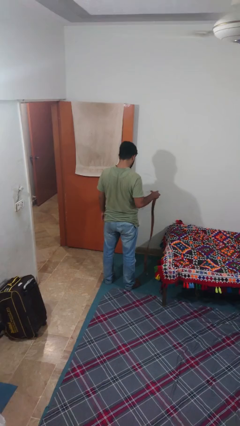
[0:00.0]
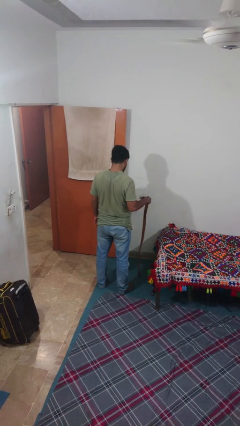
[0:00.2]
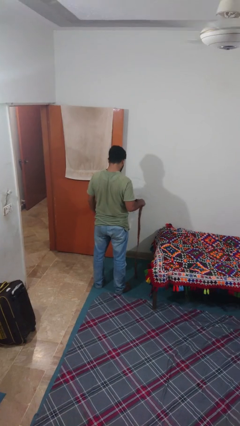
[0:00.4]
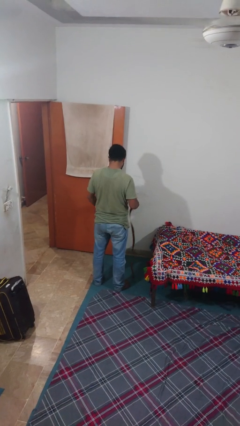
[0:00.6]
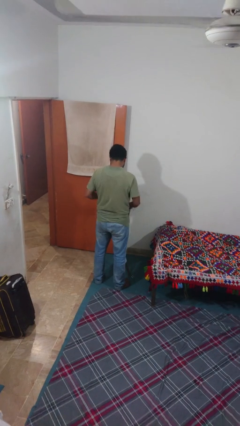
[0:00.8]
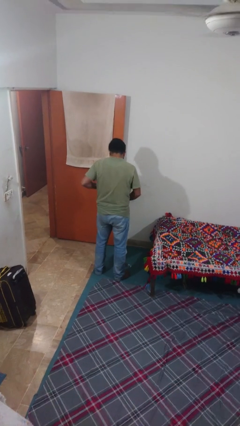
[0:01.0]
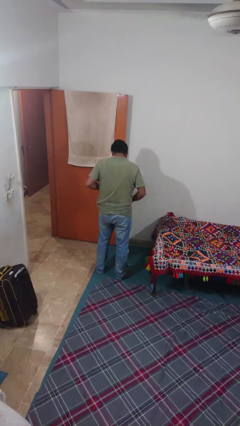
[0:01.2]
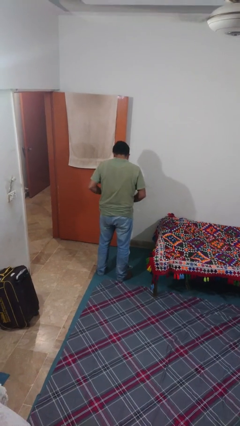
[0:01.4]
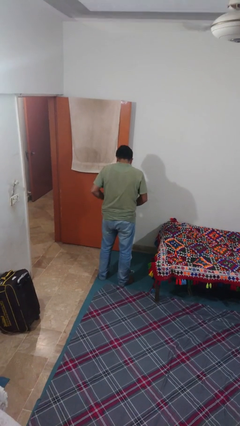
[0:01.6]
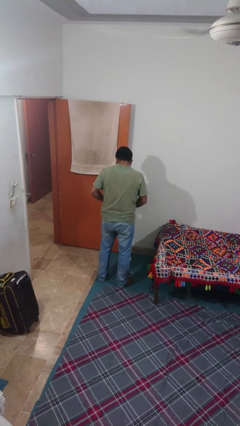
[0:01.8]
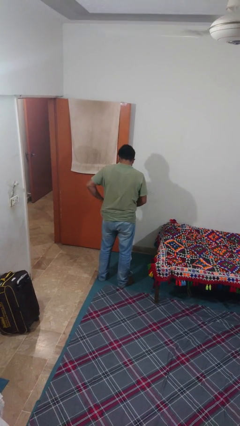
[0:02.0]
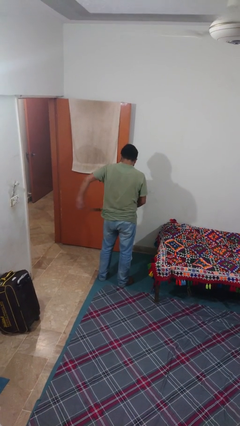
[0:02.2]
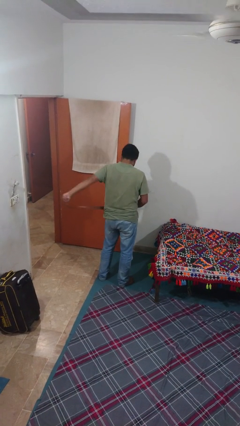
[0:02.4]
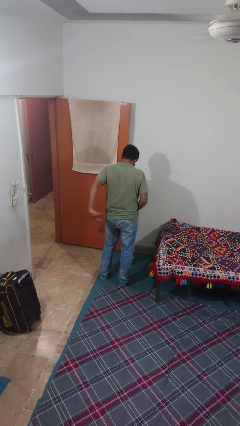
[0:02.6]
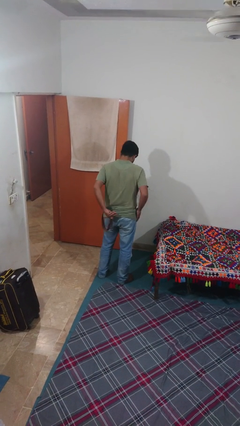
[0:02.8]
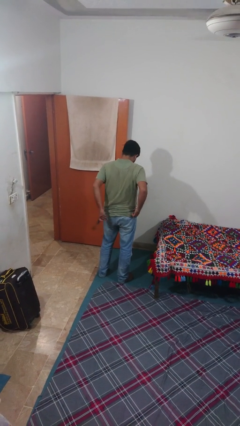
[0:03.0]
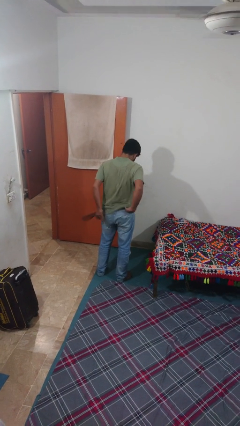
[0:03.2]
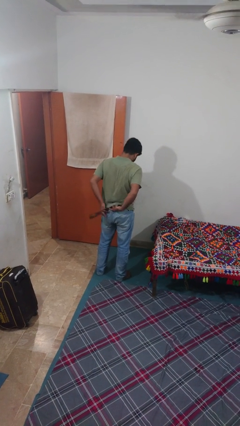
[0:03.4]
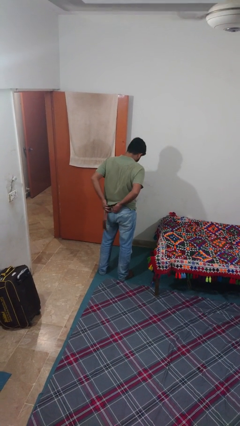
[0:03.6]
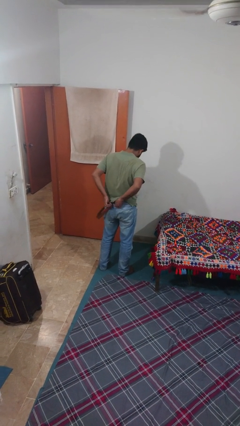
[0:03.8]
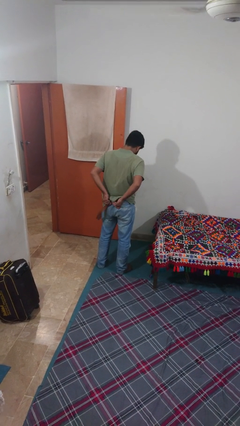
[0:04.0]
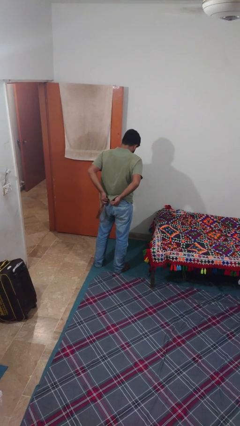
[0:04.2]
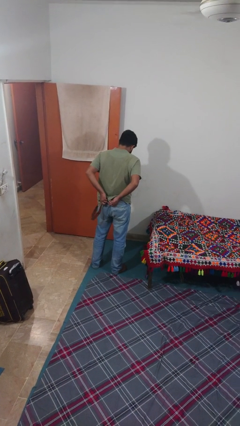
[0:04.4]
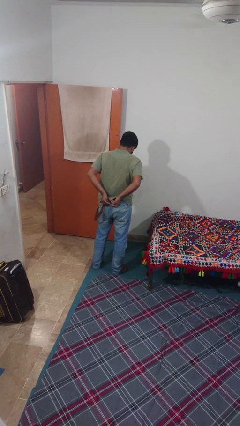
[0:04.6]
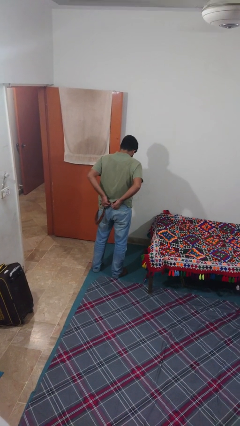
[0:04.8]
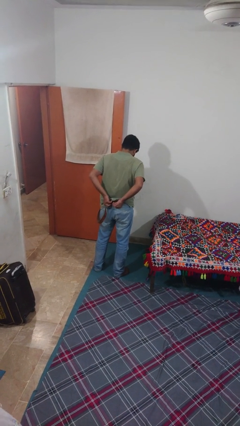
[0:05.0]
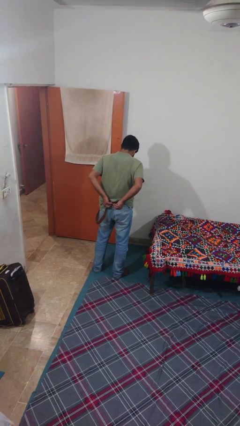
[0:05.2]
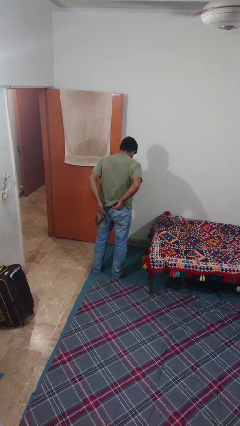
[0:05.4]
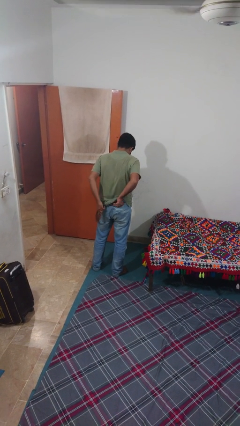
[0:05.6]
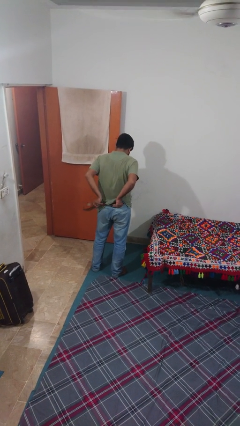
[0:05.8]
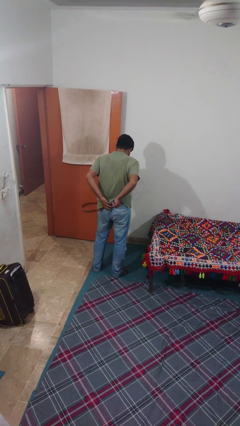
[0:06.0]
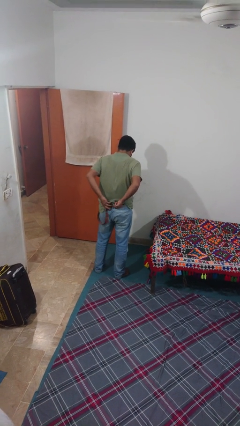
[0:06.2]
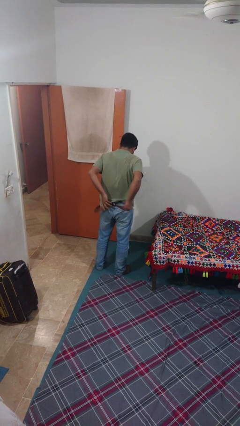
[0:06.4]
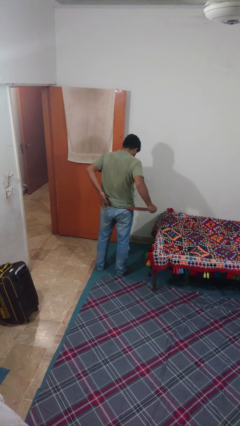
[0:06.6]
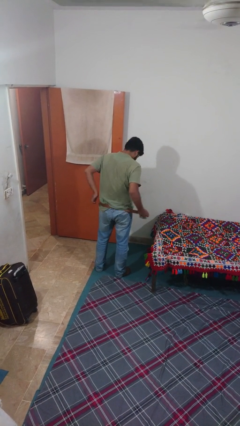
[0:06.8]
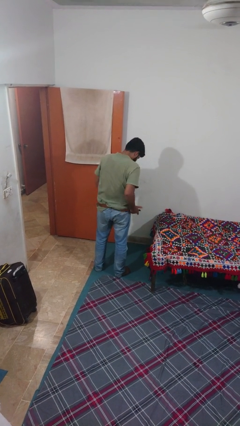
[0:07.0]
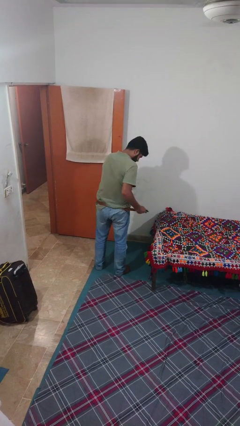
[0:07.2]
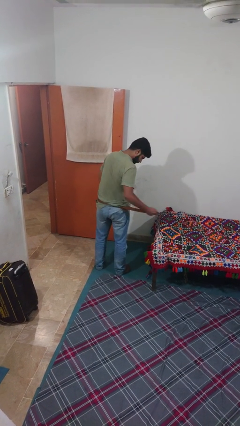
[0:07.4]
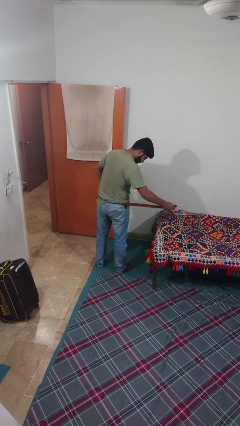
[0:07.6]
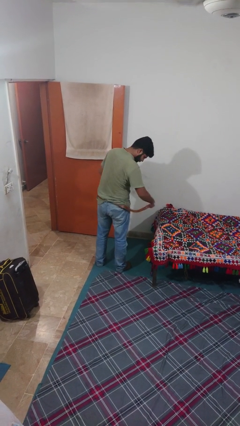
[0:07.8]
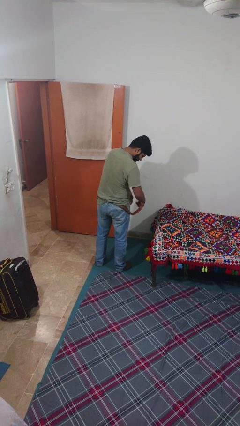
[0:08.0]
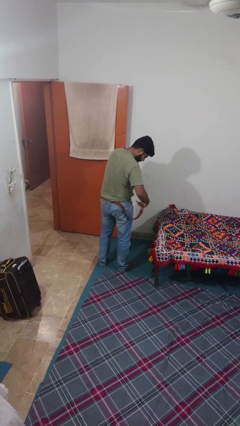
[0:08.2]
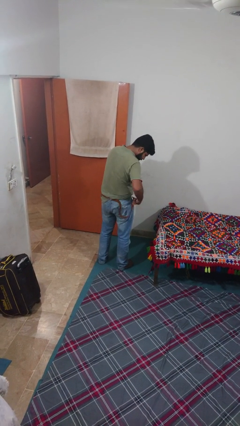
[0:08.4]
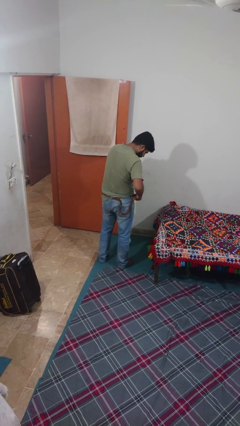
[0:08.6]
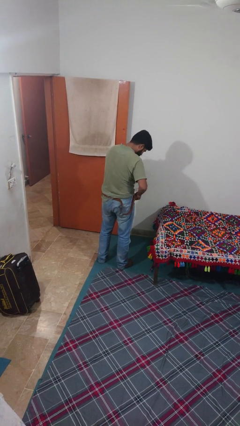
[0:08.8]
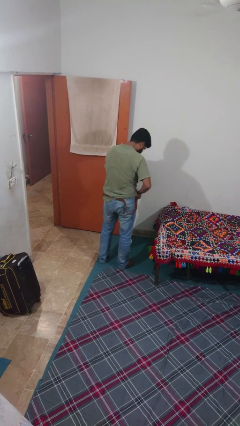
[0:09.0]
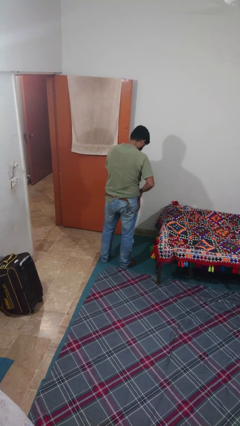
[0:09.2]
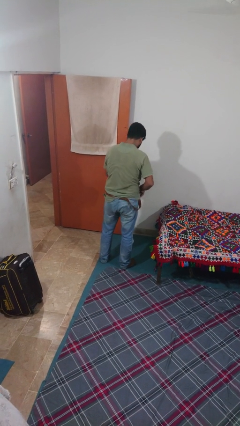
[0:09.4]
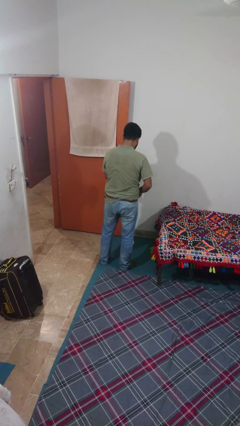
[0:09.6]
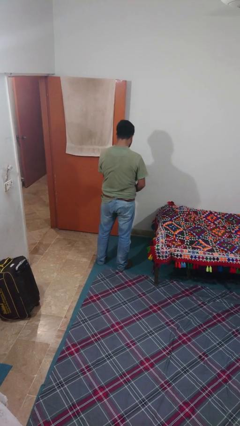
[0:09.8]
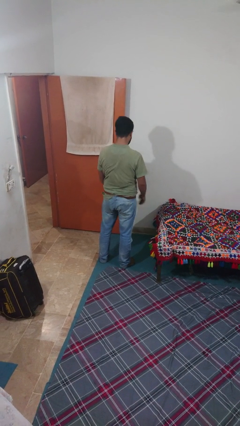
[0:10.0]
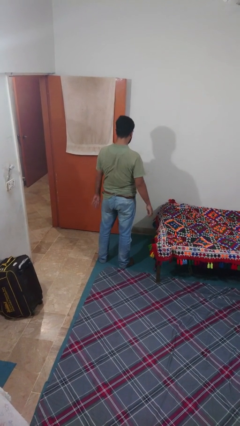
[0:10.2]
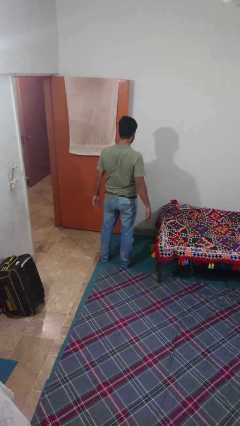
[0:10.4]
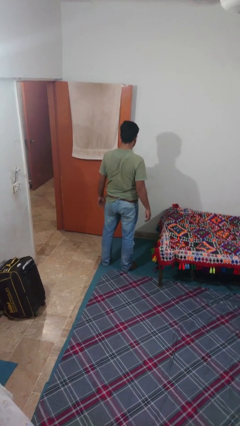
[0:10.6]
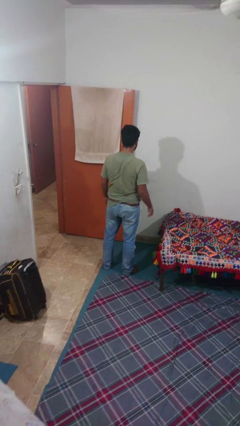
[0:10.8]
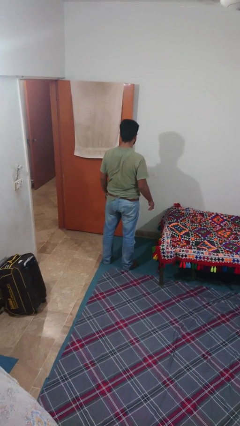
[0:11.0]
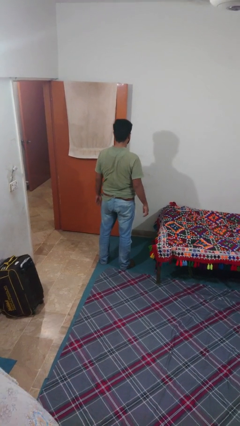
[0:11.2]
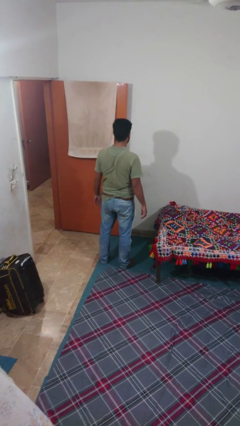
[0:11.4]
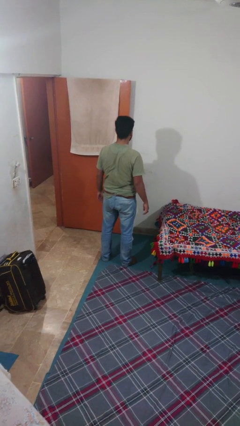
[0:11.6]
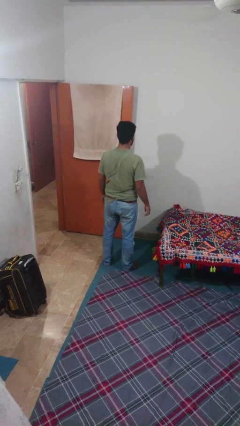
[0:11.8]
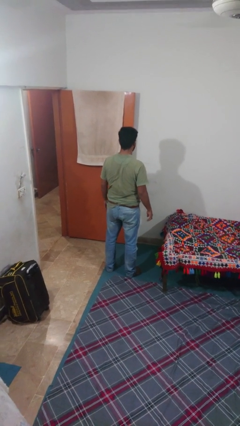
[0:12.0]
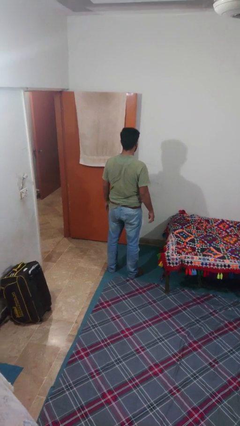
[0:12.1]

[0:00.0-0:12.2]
person puts on belt

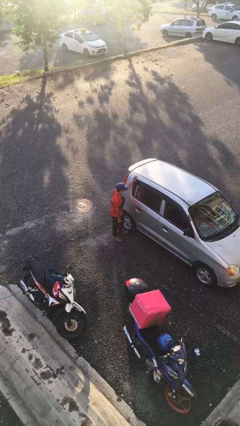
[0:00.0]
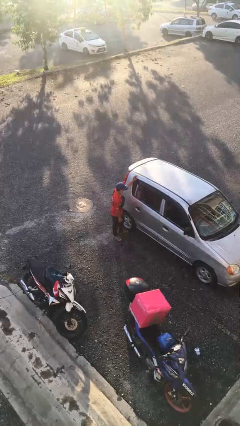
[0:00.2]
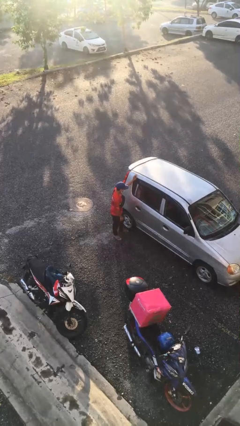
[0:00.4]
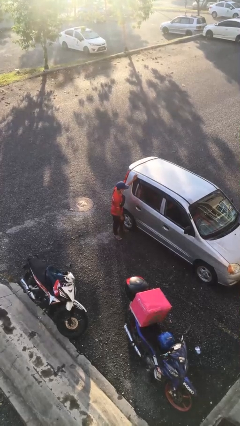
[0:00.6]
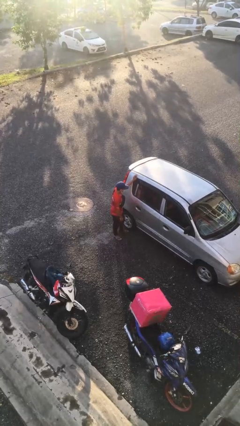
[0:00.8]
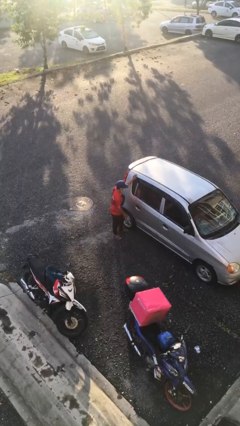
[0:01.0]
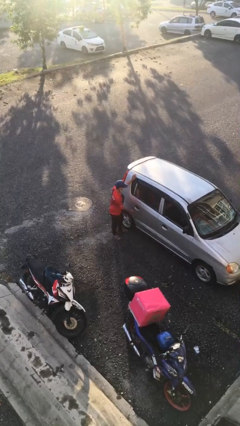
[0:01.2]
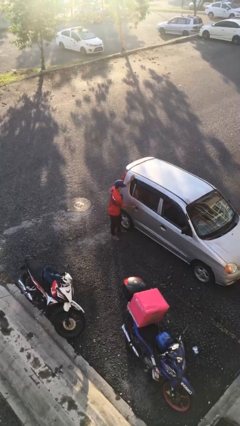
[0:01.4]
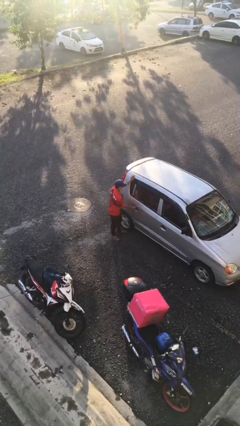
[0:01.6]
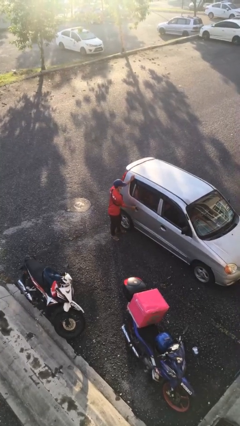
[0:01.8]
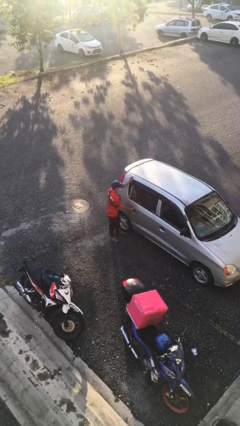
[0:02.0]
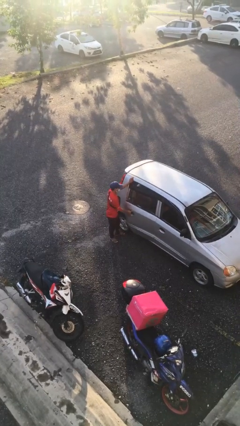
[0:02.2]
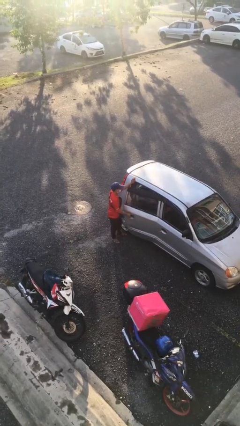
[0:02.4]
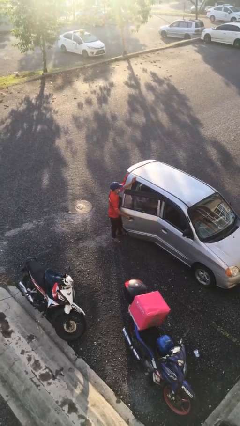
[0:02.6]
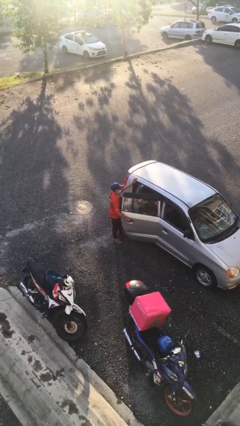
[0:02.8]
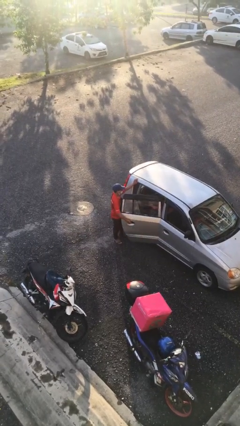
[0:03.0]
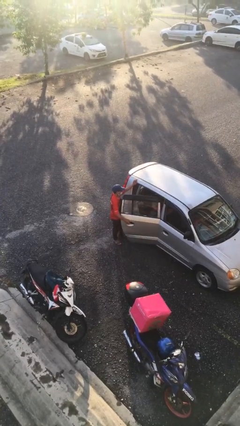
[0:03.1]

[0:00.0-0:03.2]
person opens car door

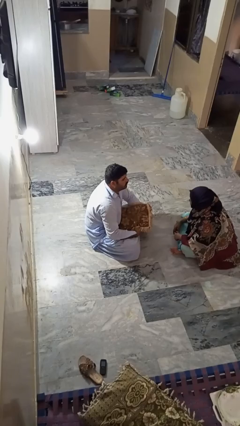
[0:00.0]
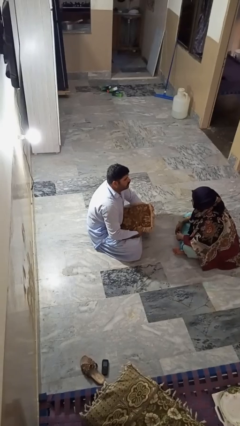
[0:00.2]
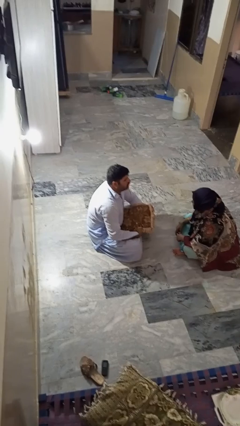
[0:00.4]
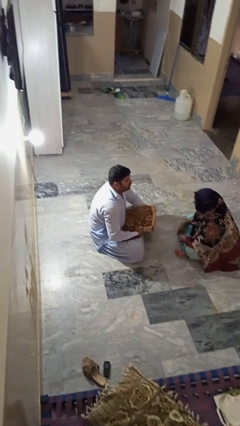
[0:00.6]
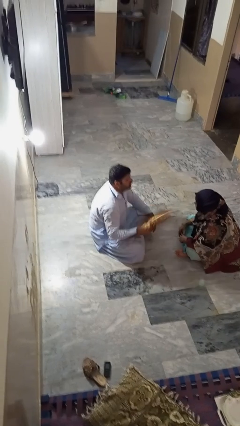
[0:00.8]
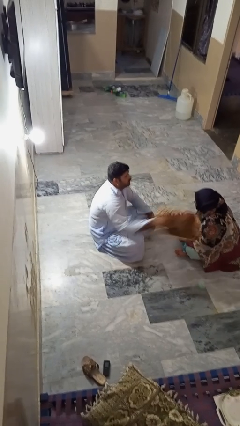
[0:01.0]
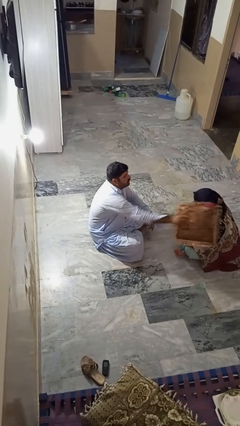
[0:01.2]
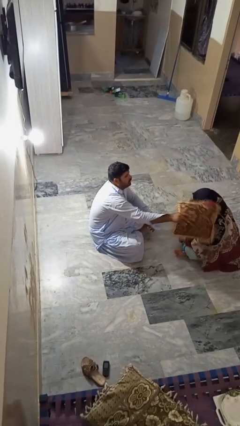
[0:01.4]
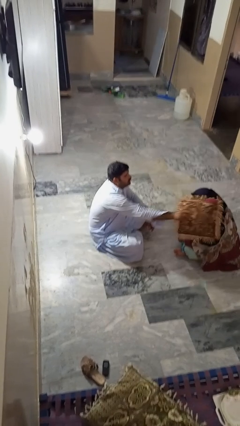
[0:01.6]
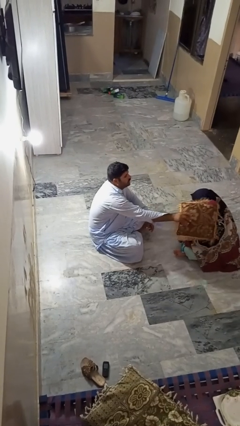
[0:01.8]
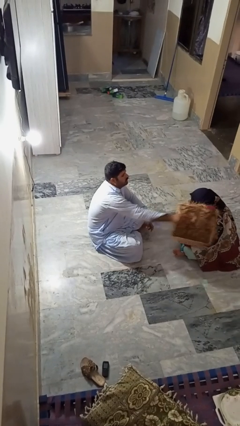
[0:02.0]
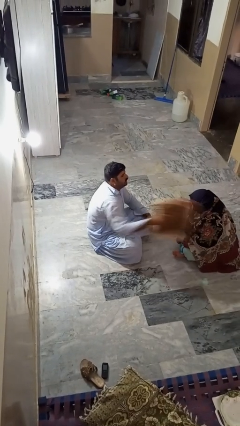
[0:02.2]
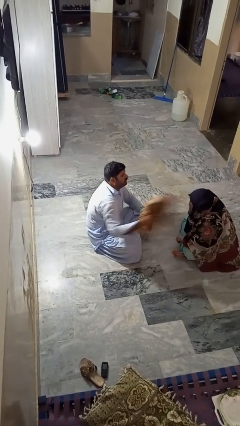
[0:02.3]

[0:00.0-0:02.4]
person hits person with pillow

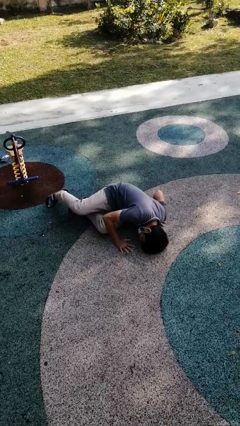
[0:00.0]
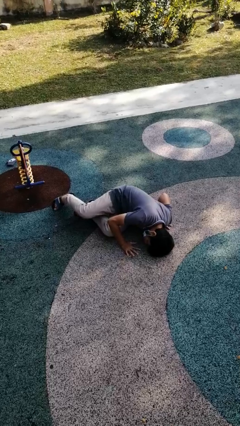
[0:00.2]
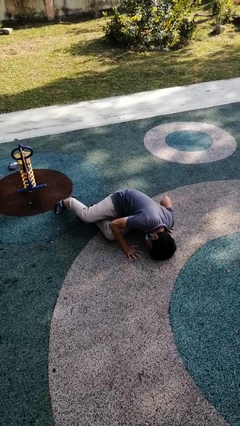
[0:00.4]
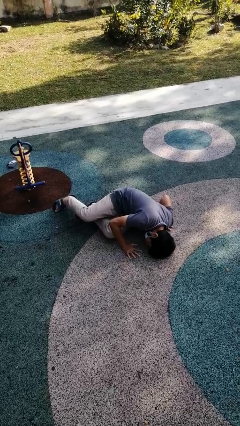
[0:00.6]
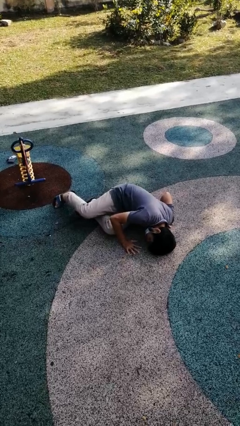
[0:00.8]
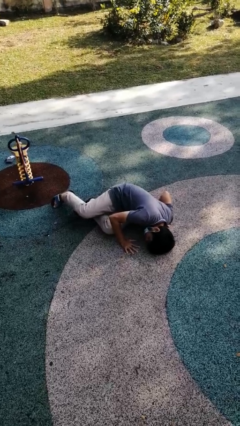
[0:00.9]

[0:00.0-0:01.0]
person lies down on floor
